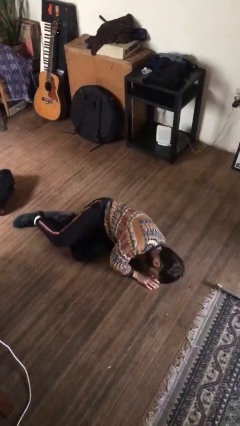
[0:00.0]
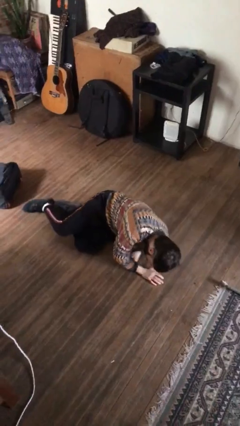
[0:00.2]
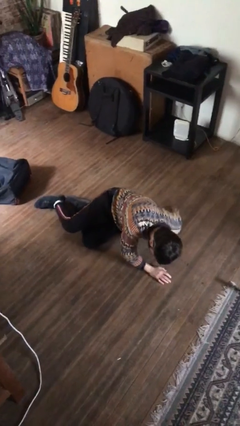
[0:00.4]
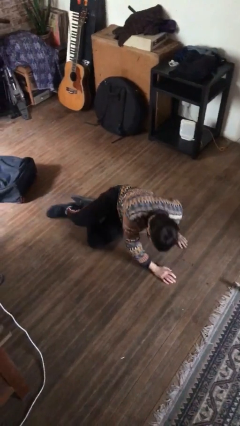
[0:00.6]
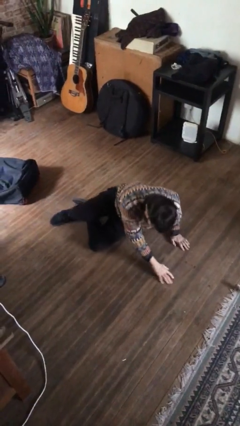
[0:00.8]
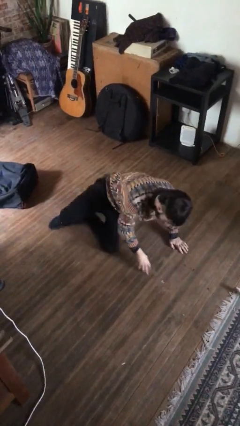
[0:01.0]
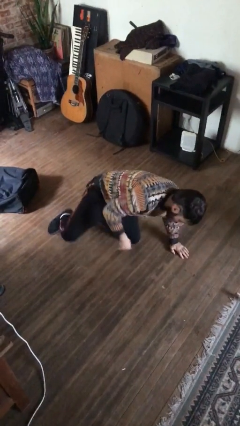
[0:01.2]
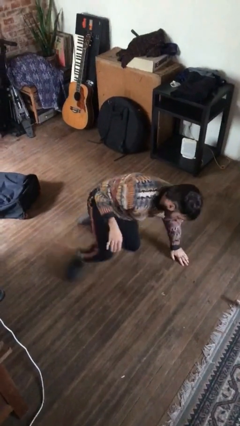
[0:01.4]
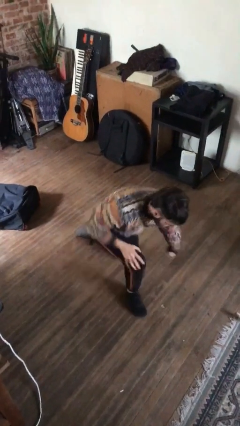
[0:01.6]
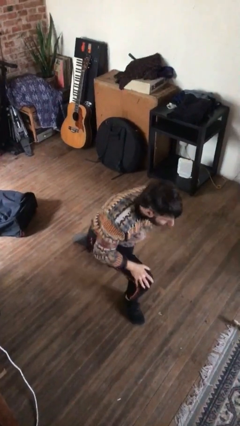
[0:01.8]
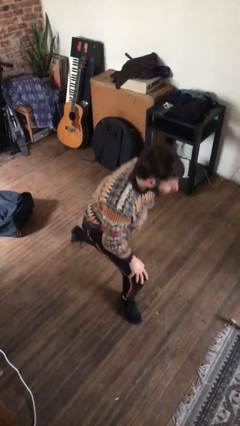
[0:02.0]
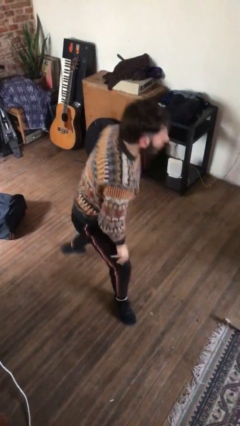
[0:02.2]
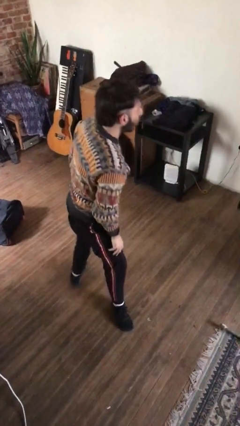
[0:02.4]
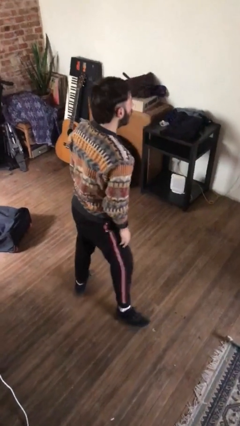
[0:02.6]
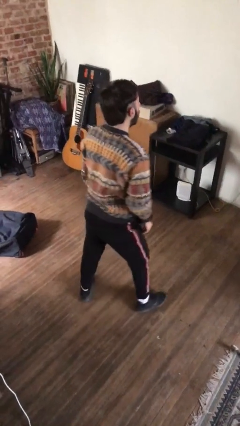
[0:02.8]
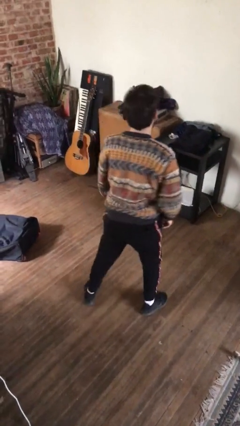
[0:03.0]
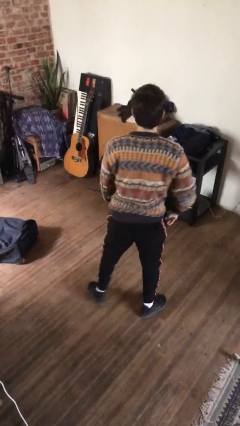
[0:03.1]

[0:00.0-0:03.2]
person stands up from floor

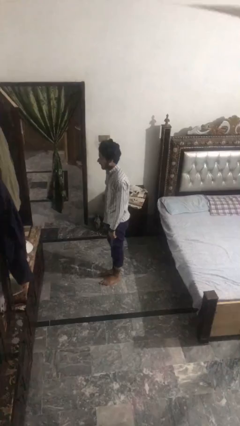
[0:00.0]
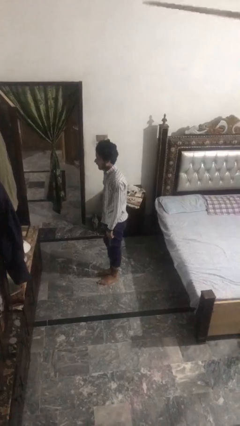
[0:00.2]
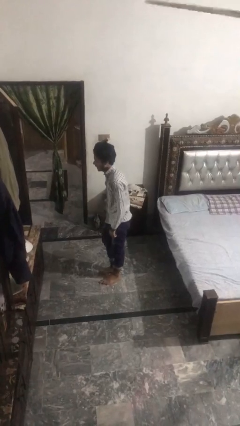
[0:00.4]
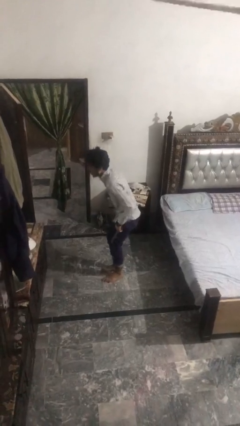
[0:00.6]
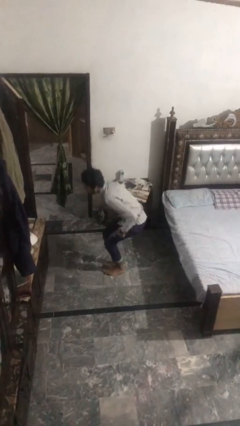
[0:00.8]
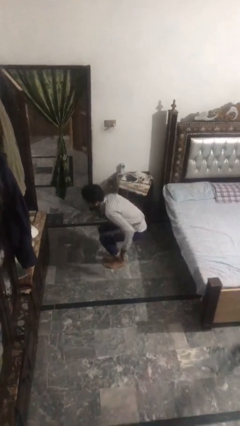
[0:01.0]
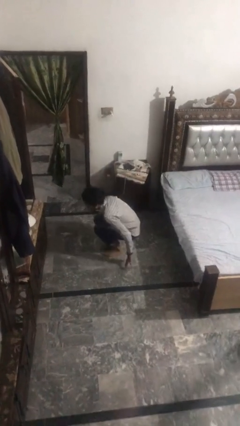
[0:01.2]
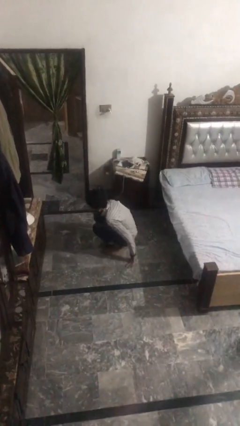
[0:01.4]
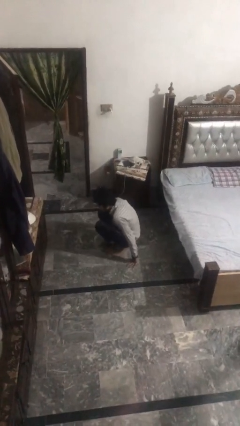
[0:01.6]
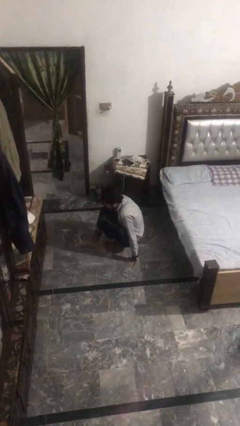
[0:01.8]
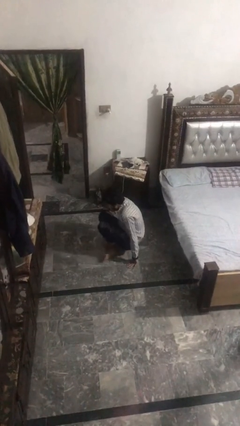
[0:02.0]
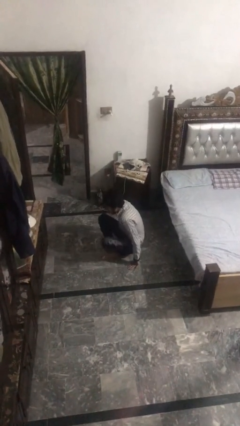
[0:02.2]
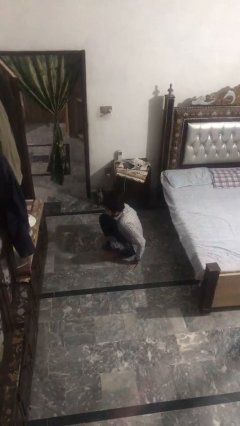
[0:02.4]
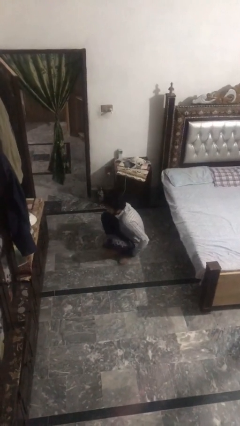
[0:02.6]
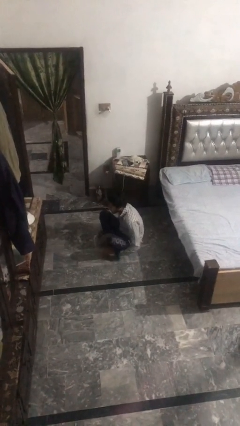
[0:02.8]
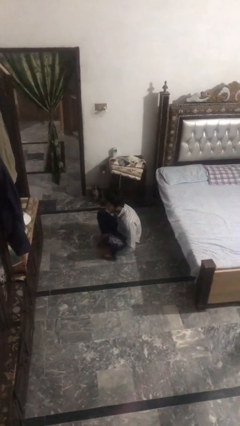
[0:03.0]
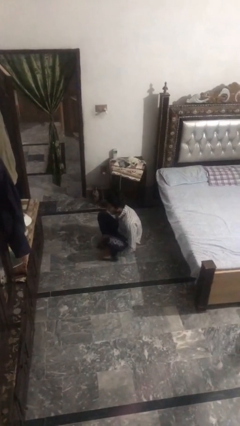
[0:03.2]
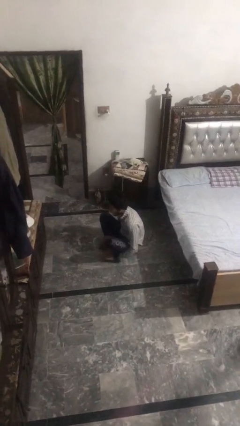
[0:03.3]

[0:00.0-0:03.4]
person sits crisscross

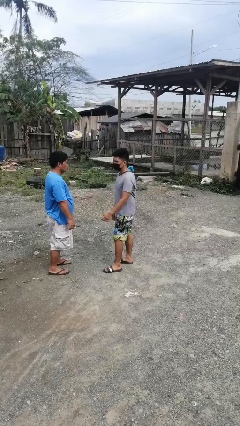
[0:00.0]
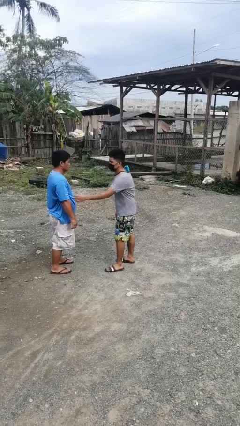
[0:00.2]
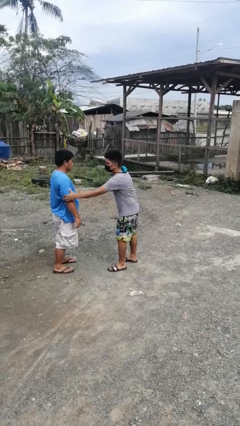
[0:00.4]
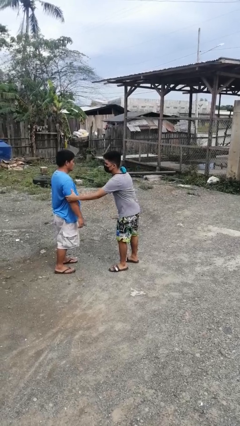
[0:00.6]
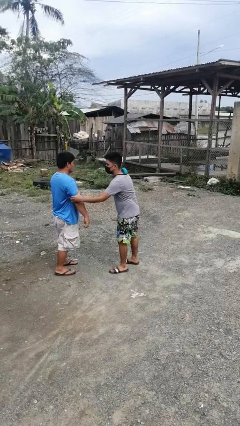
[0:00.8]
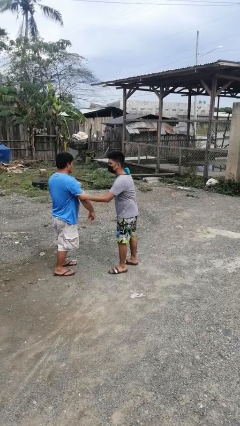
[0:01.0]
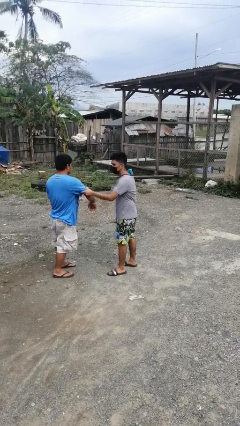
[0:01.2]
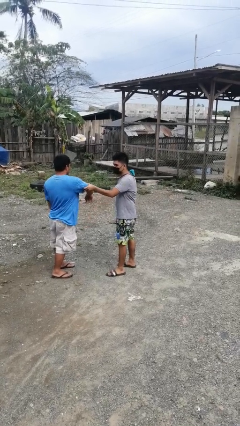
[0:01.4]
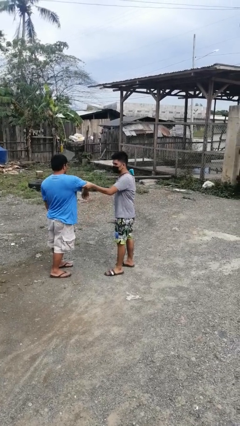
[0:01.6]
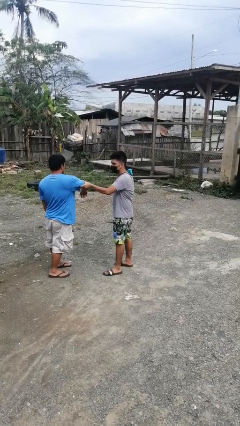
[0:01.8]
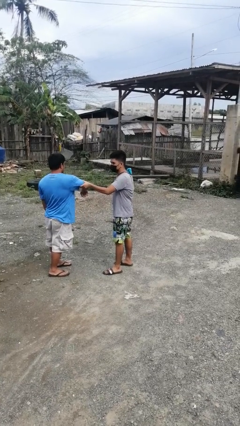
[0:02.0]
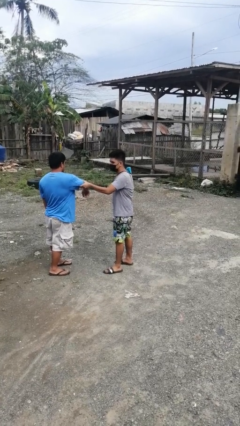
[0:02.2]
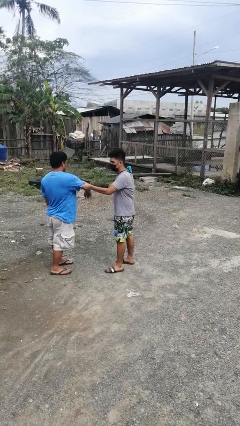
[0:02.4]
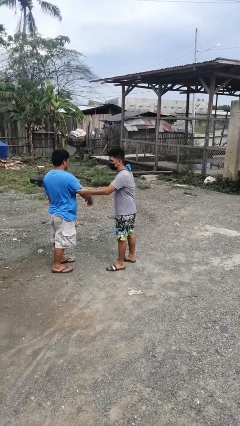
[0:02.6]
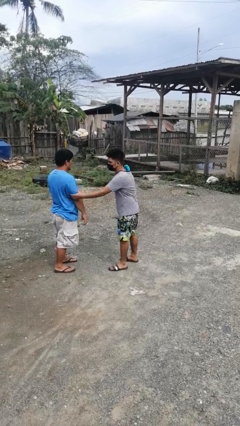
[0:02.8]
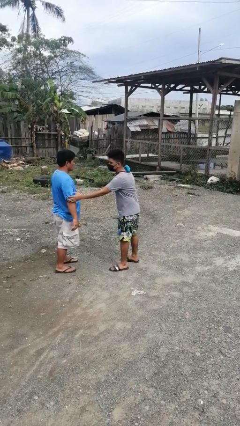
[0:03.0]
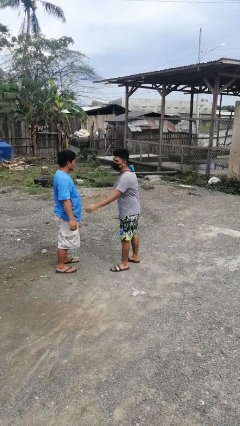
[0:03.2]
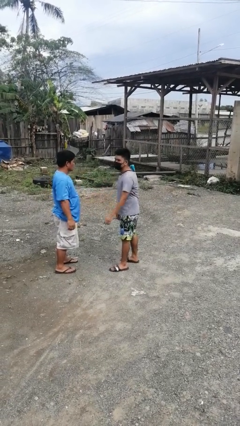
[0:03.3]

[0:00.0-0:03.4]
person grabs person by bicep

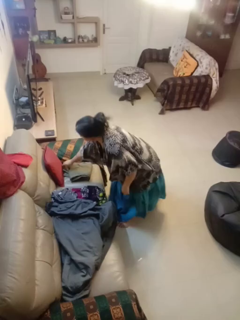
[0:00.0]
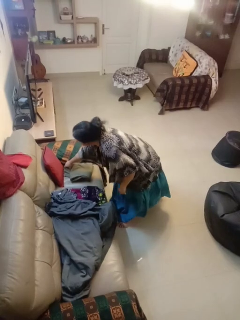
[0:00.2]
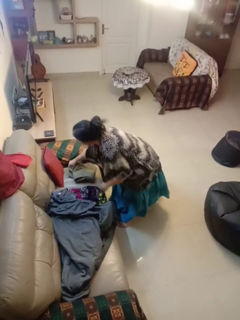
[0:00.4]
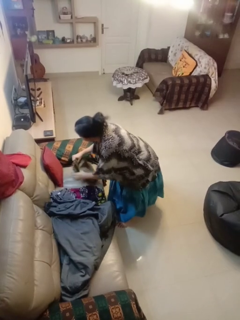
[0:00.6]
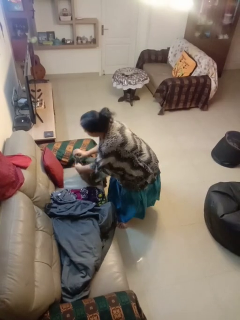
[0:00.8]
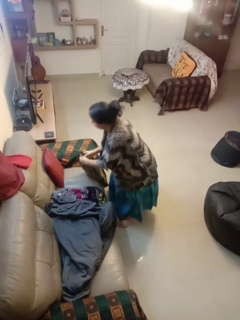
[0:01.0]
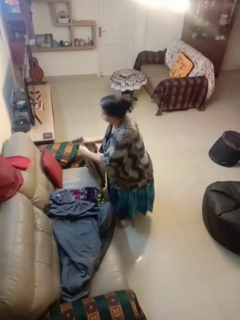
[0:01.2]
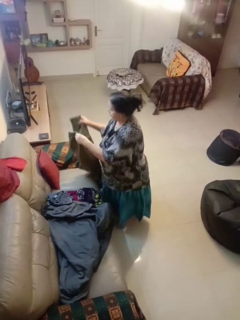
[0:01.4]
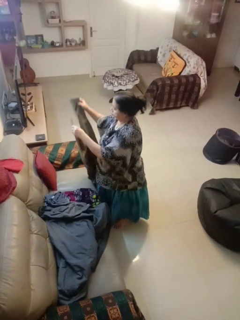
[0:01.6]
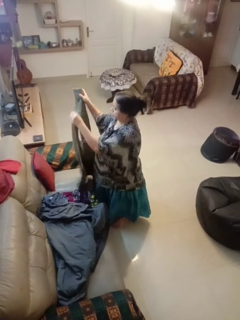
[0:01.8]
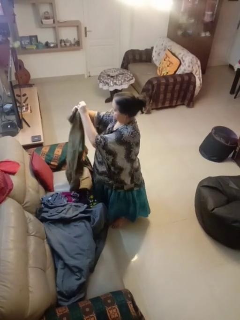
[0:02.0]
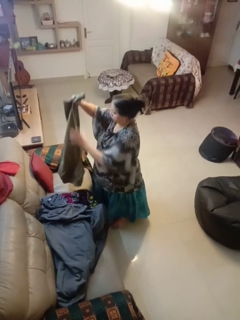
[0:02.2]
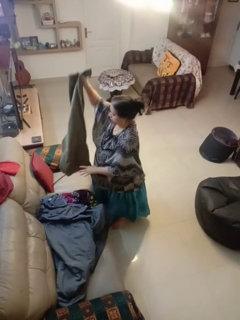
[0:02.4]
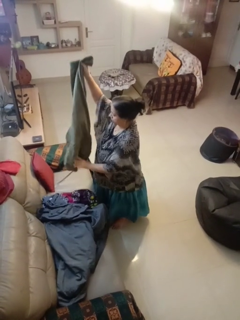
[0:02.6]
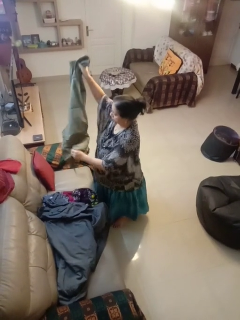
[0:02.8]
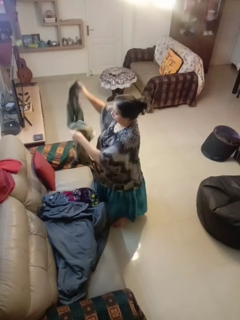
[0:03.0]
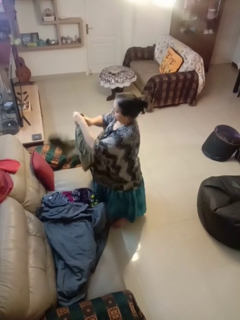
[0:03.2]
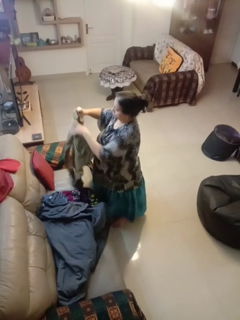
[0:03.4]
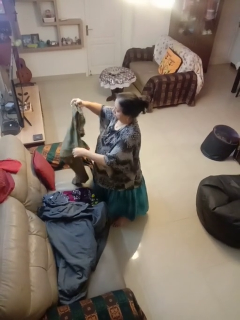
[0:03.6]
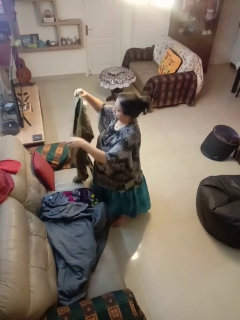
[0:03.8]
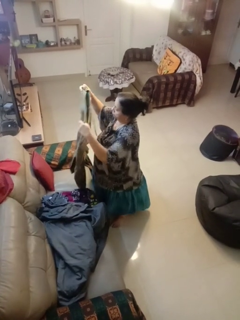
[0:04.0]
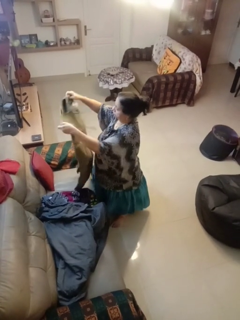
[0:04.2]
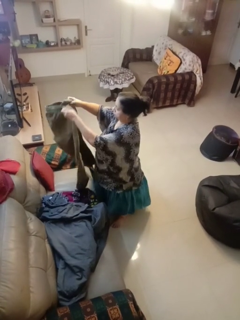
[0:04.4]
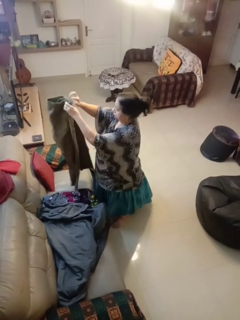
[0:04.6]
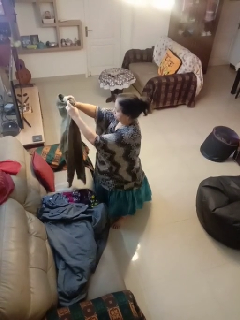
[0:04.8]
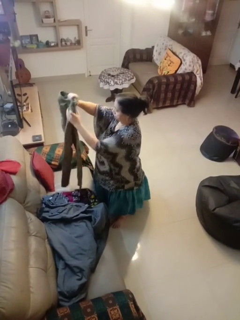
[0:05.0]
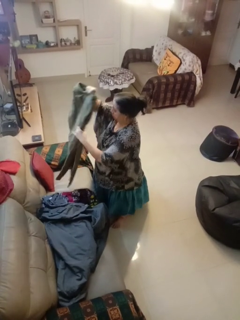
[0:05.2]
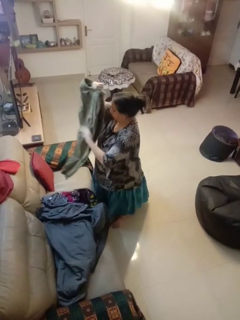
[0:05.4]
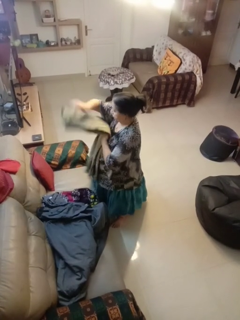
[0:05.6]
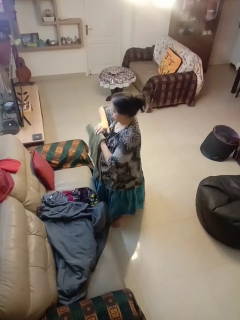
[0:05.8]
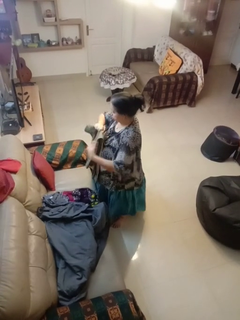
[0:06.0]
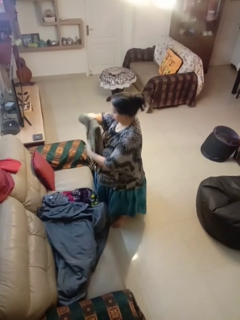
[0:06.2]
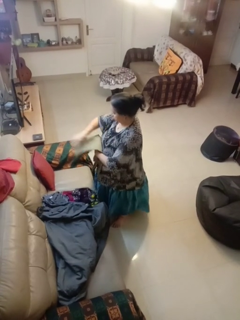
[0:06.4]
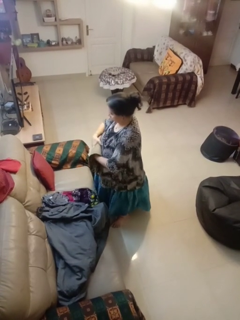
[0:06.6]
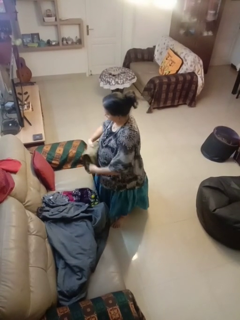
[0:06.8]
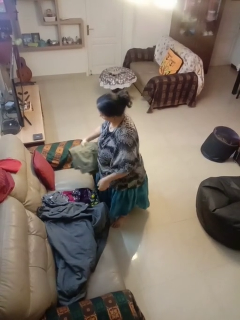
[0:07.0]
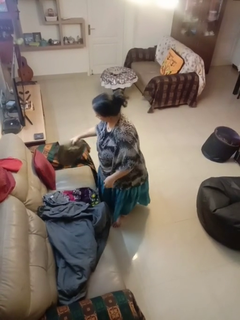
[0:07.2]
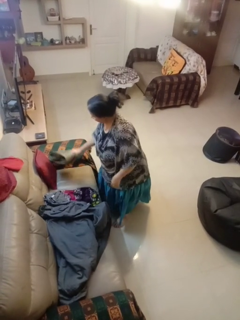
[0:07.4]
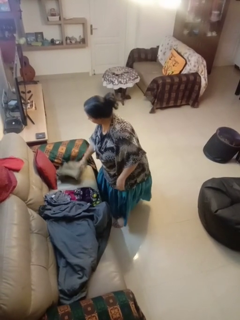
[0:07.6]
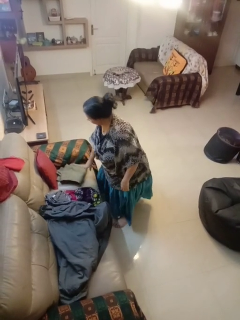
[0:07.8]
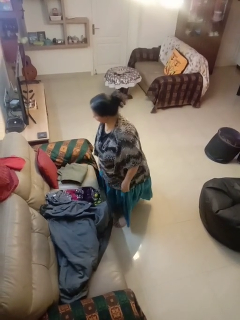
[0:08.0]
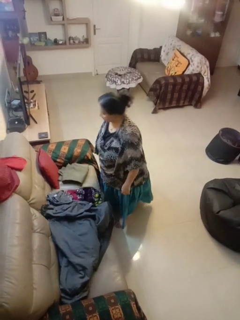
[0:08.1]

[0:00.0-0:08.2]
person folds pants

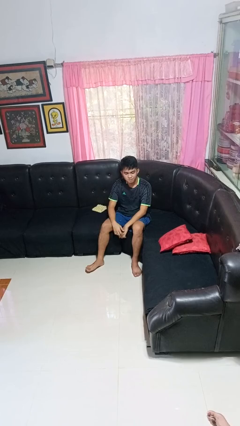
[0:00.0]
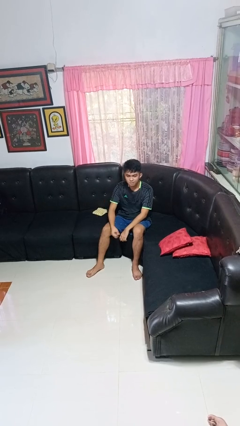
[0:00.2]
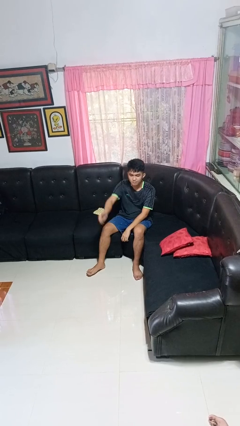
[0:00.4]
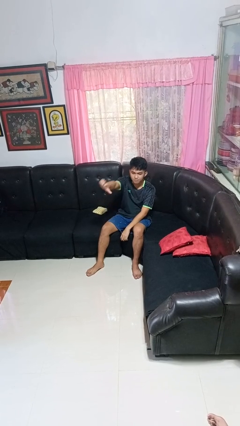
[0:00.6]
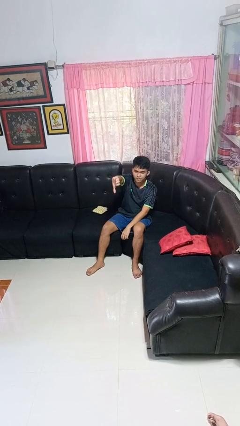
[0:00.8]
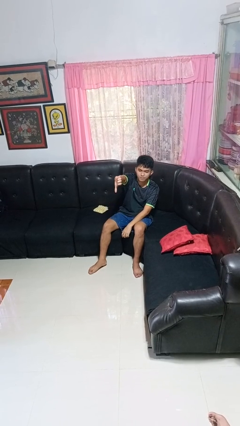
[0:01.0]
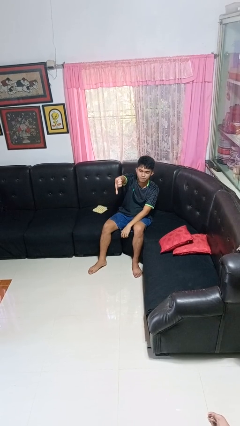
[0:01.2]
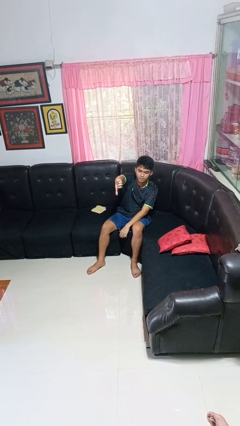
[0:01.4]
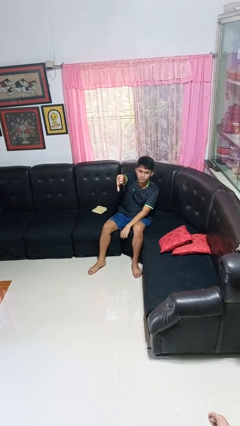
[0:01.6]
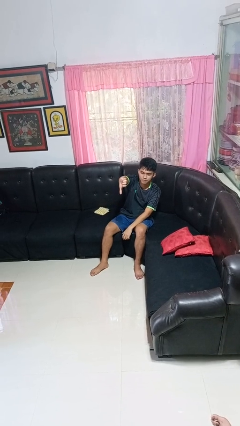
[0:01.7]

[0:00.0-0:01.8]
person gestures thumbs down
